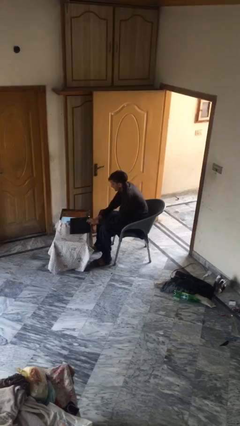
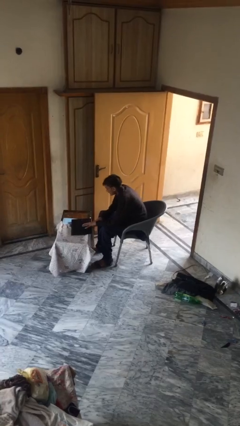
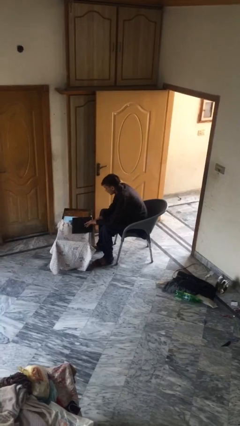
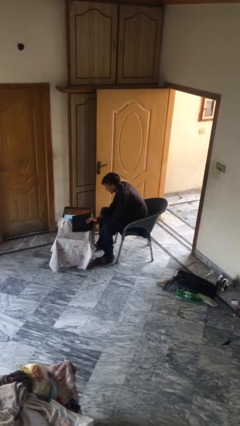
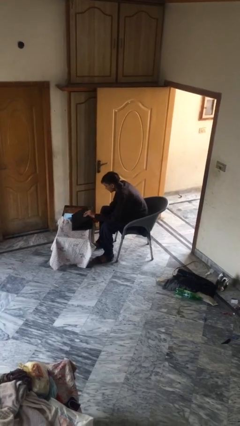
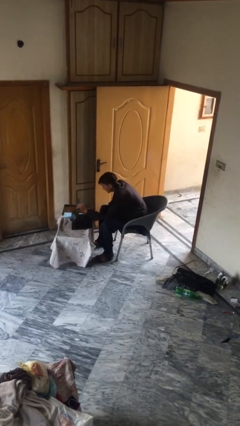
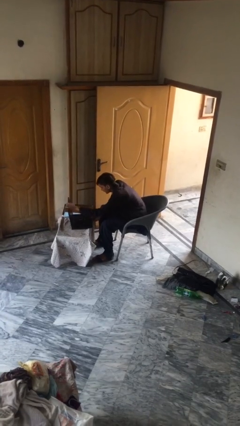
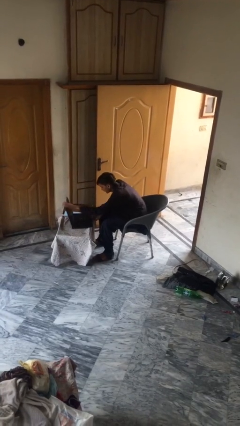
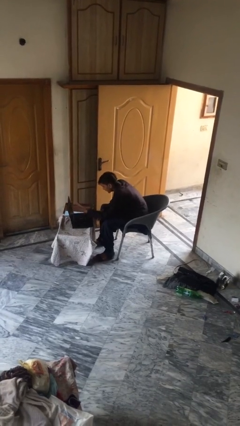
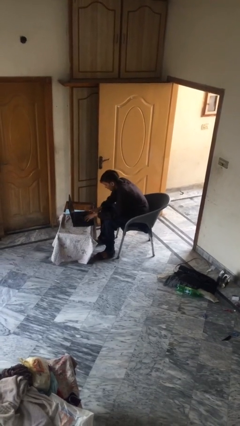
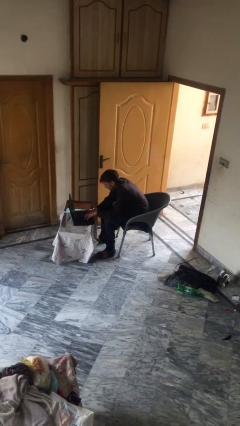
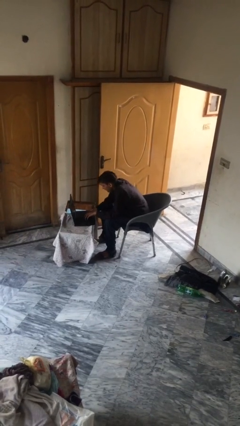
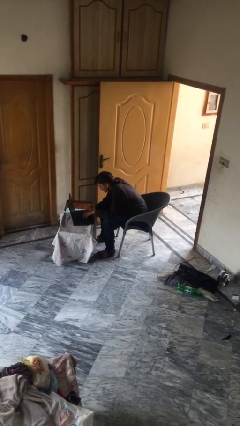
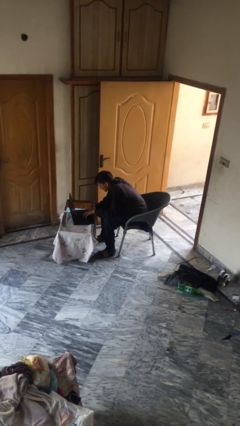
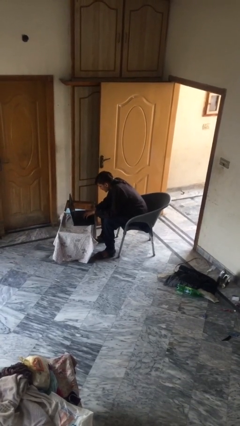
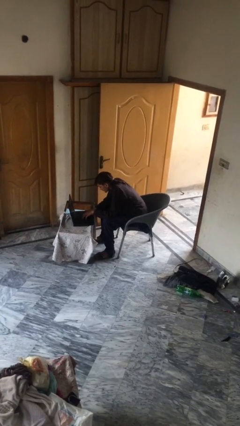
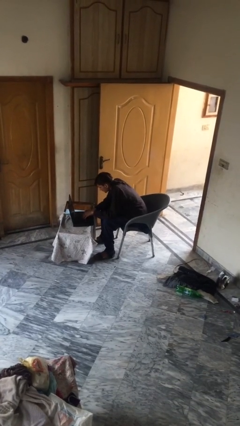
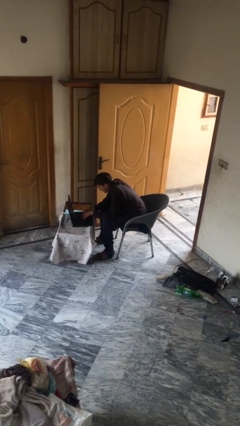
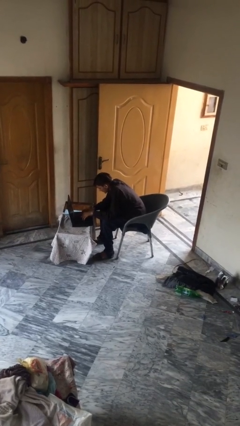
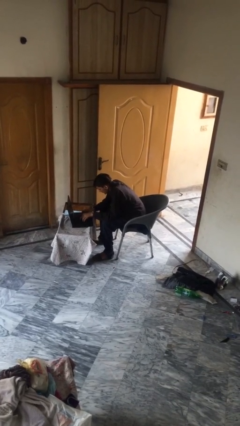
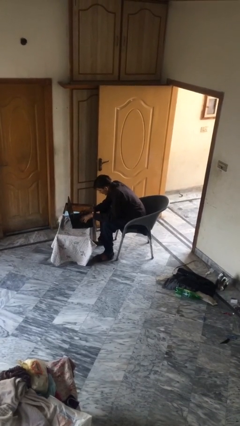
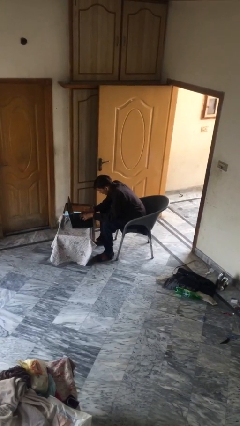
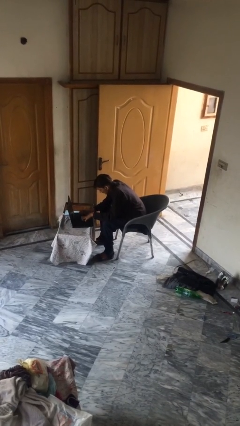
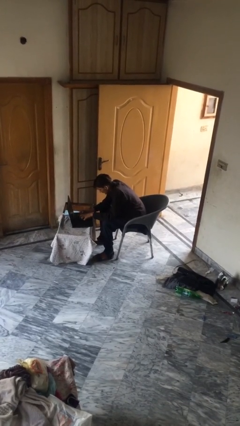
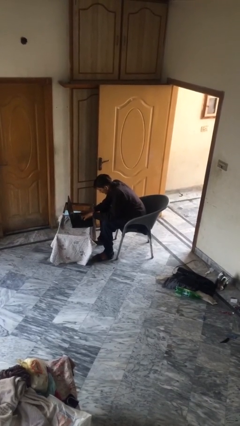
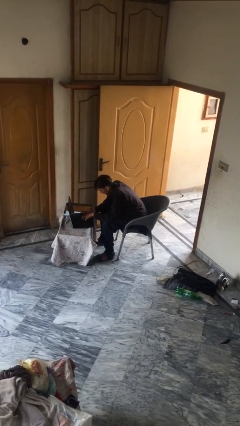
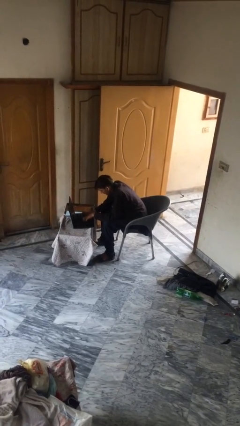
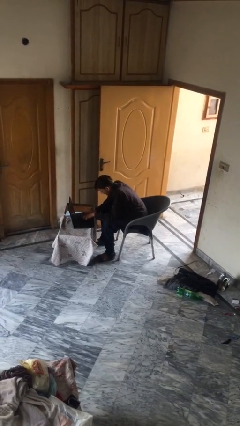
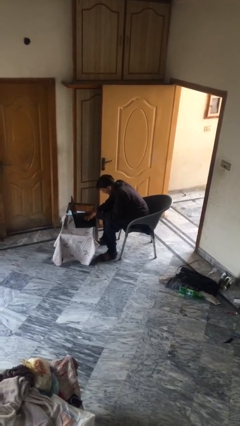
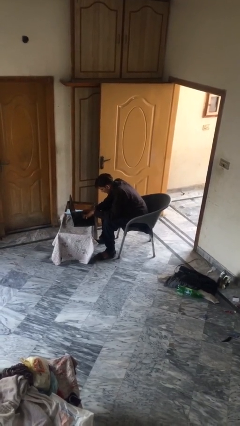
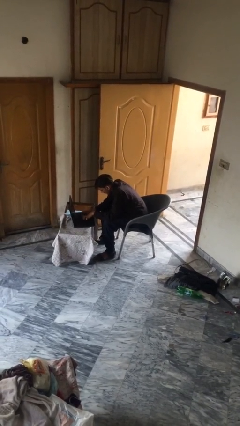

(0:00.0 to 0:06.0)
person interacts with laptop

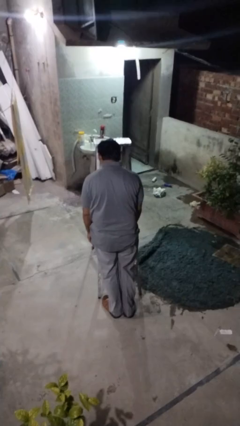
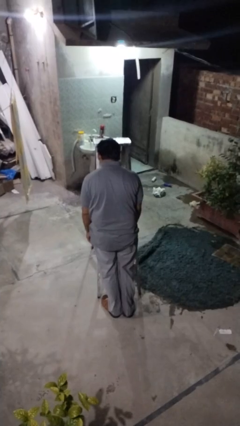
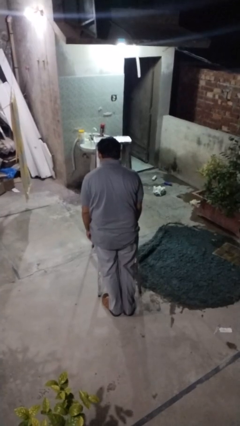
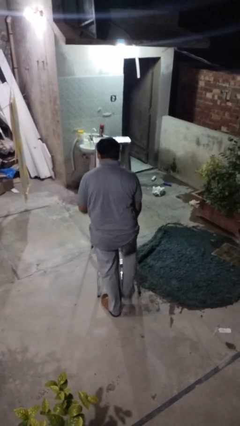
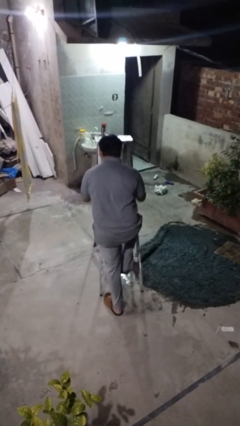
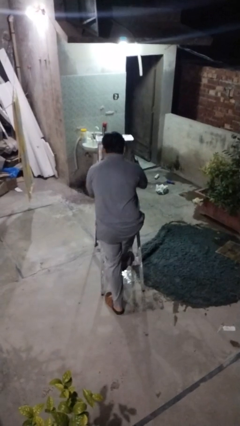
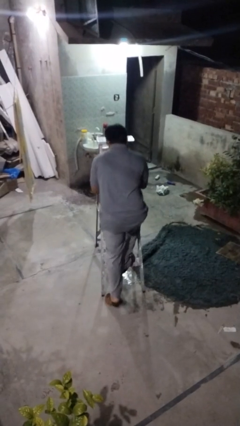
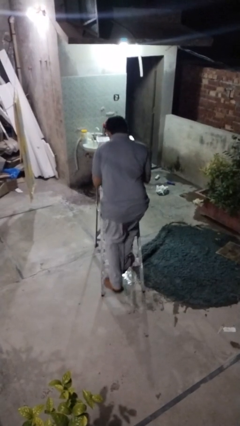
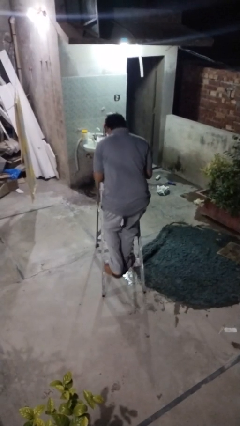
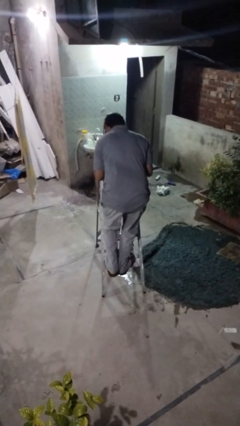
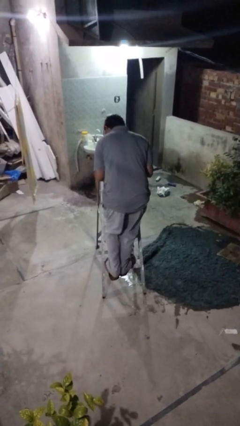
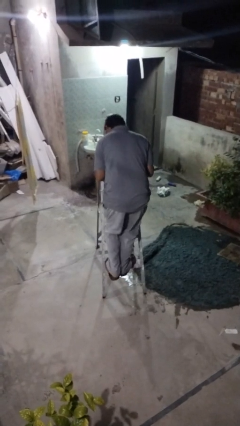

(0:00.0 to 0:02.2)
person climbs up ladder

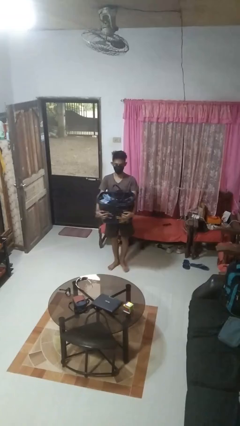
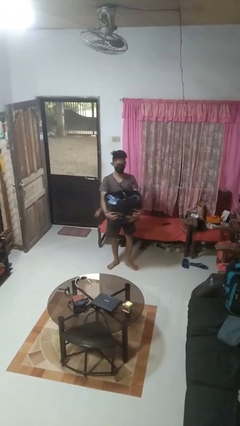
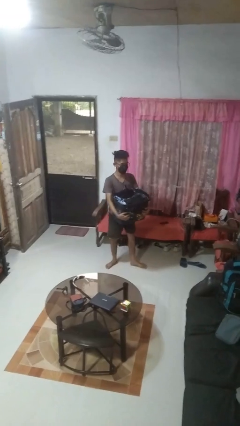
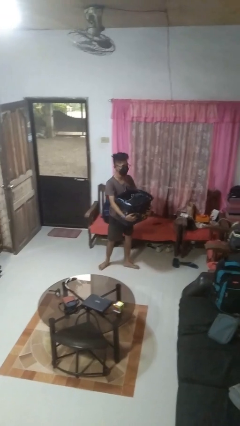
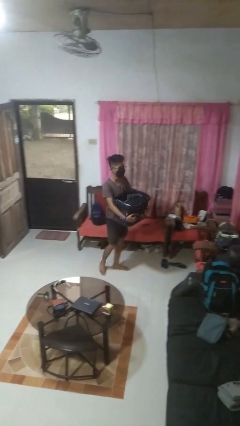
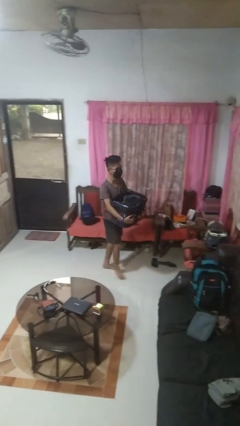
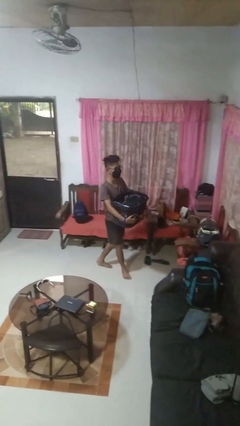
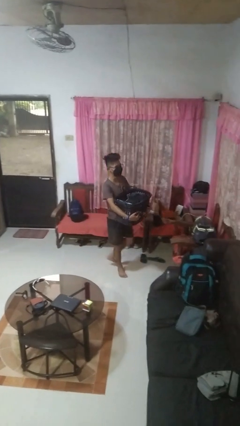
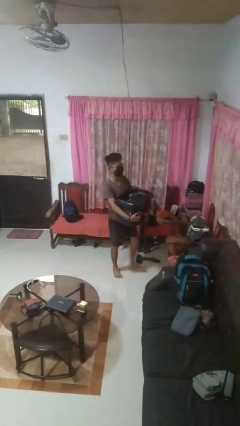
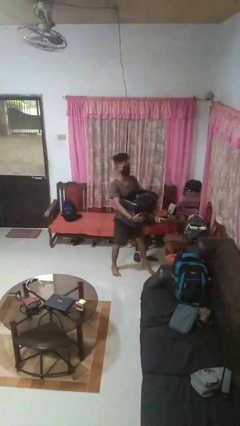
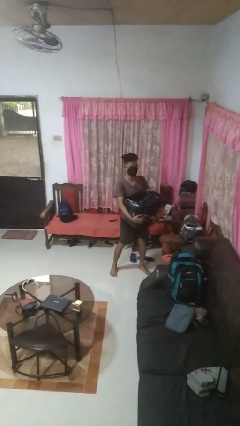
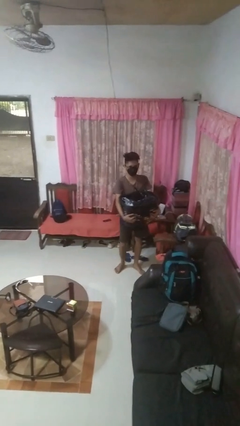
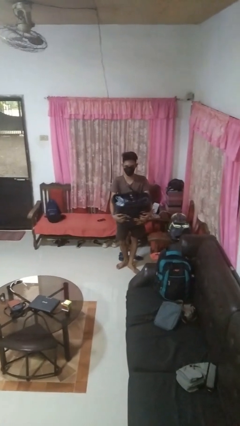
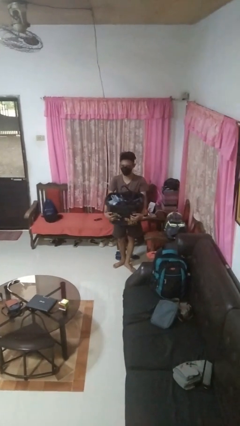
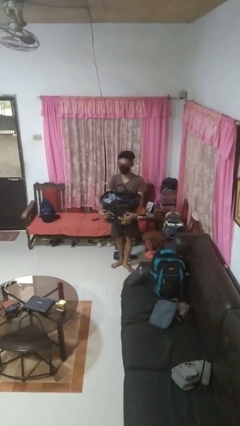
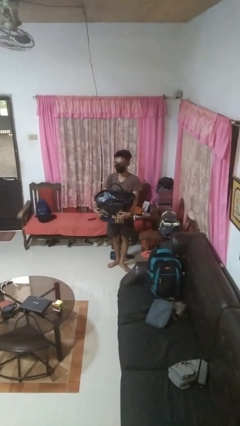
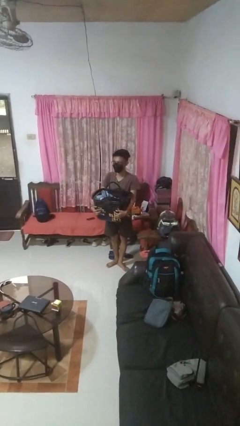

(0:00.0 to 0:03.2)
person carries laundry basket

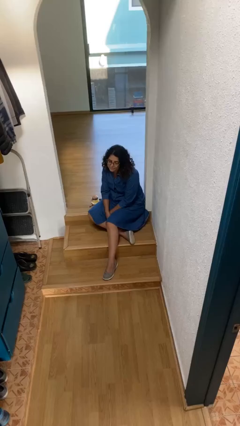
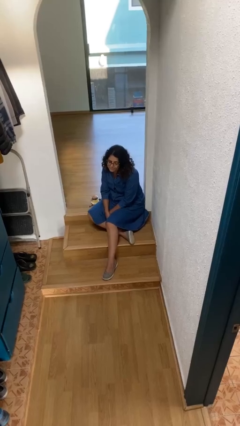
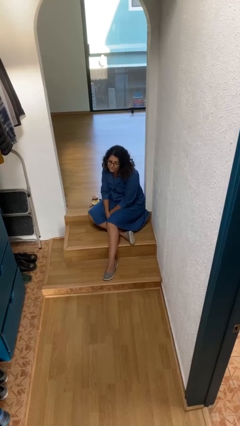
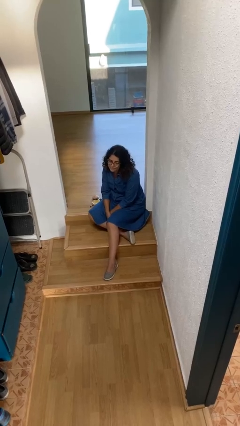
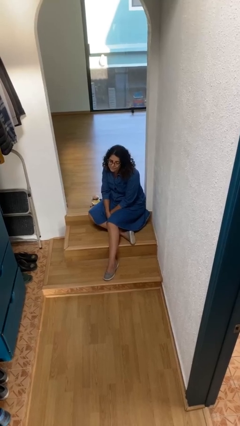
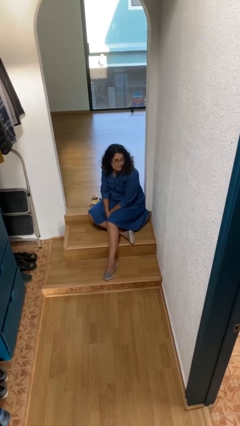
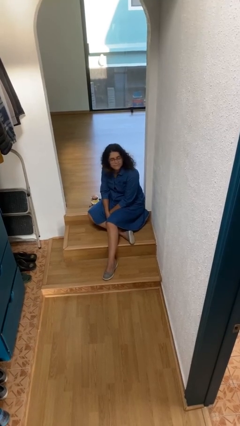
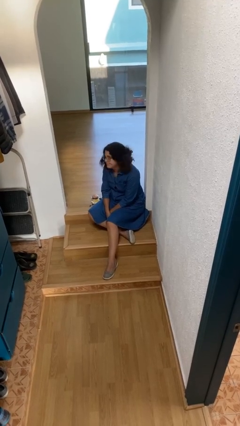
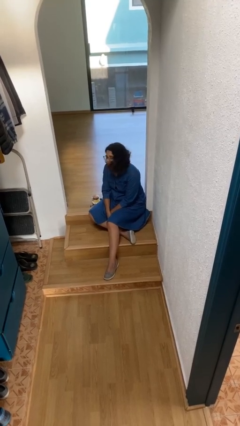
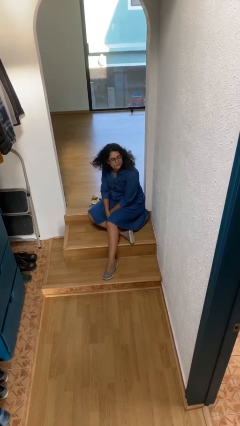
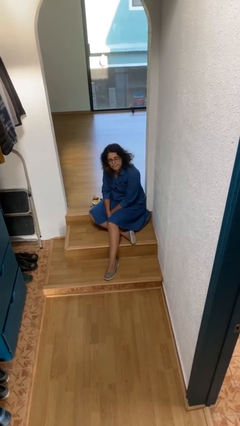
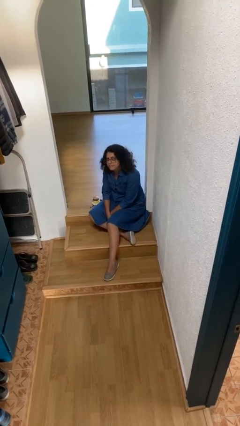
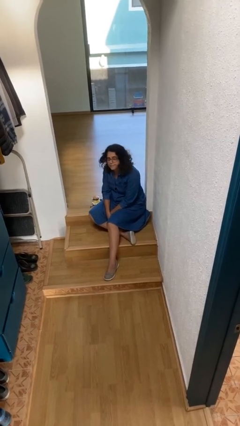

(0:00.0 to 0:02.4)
person shakes head

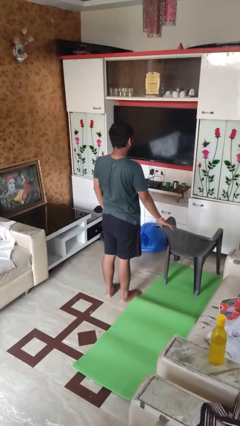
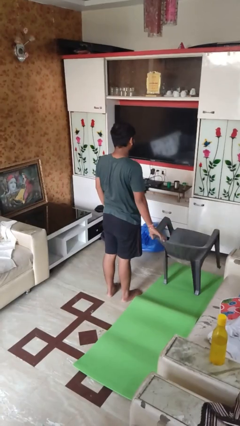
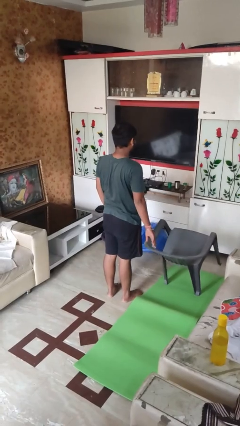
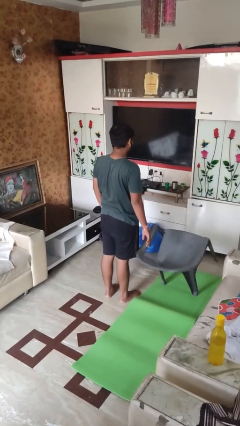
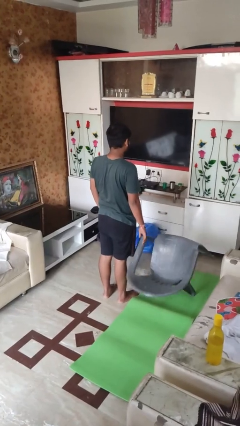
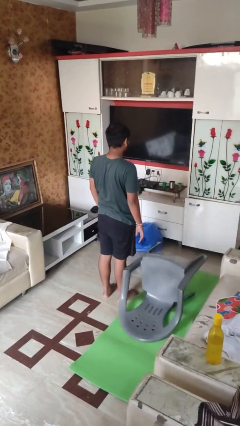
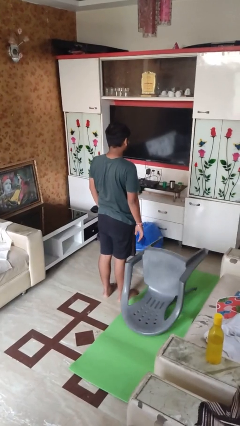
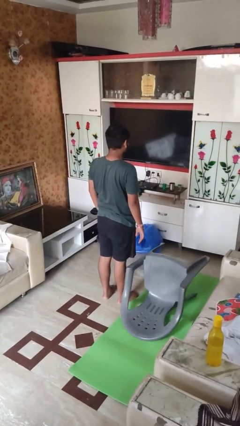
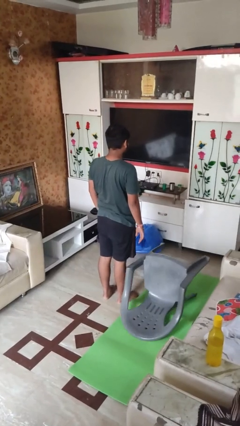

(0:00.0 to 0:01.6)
person knocks over furniture

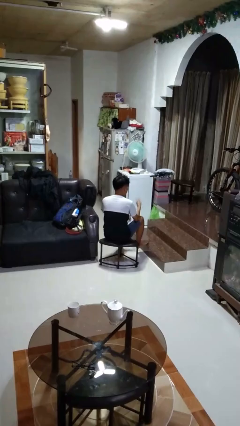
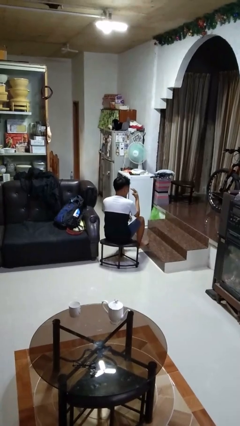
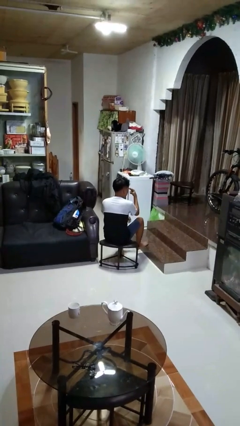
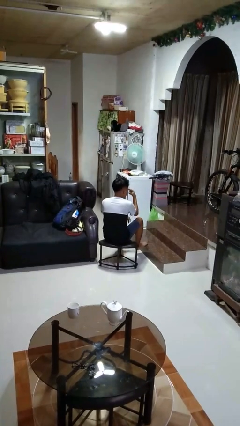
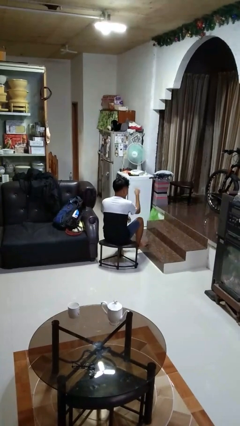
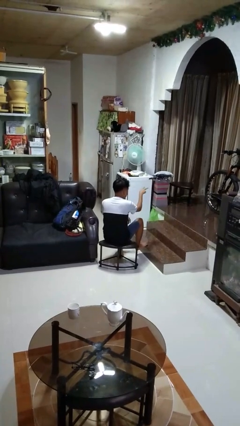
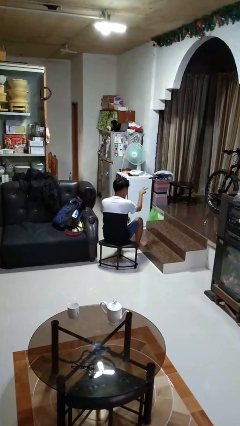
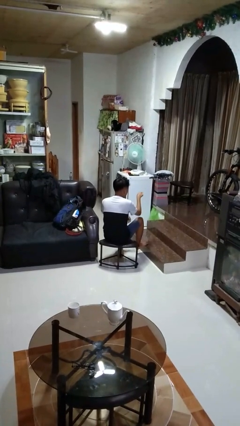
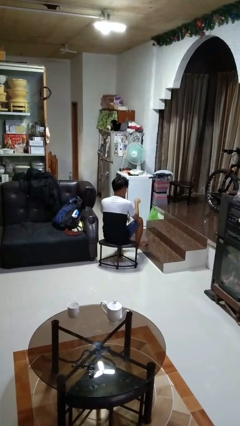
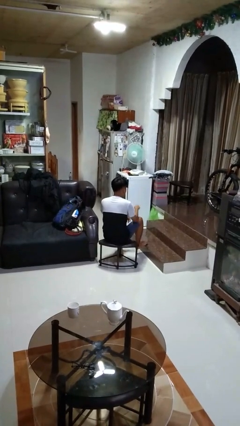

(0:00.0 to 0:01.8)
person gestures watch closely
